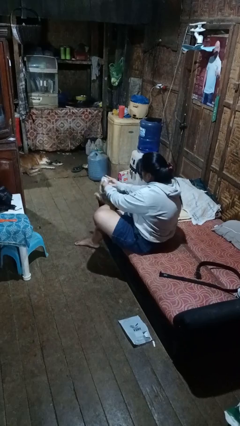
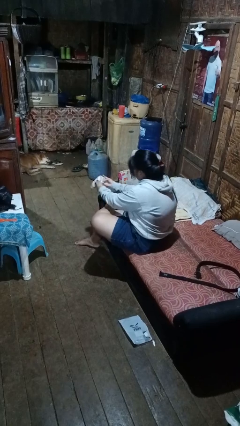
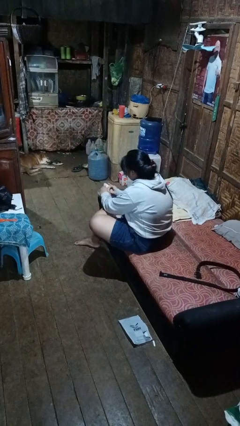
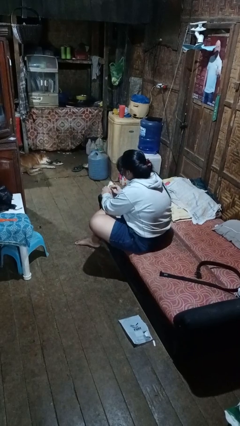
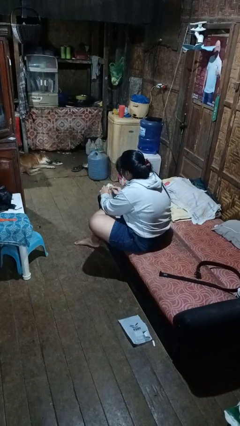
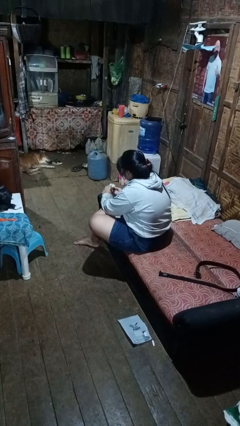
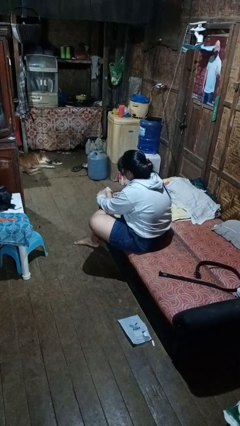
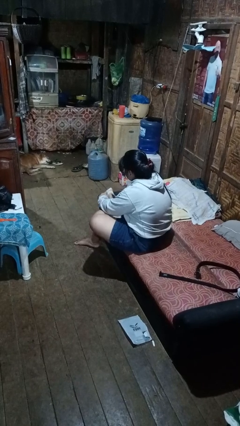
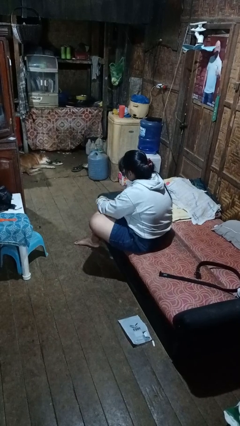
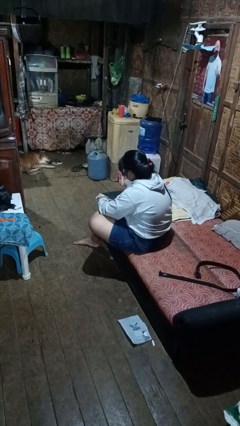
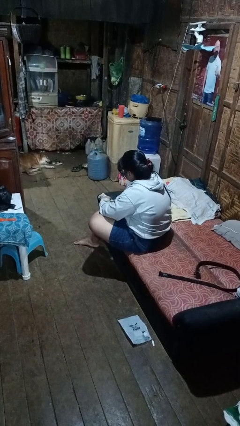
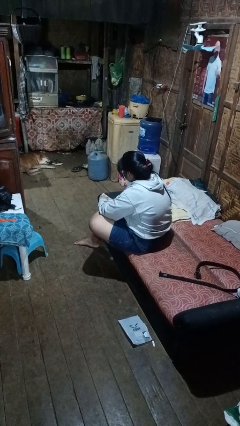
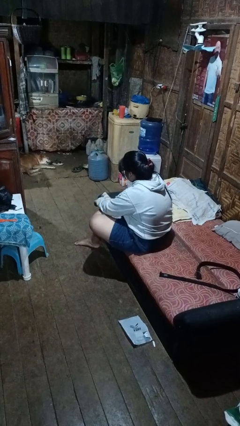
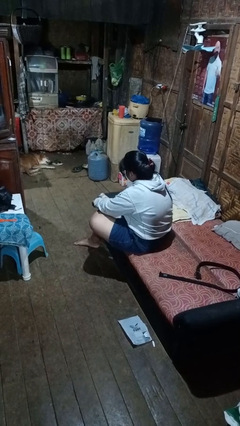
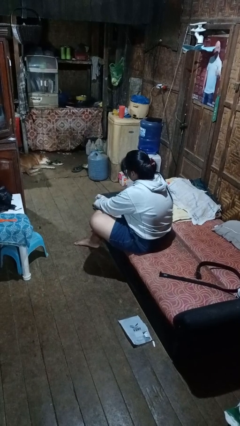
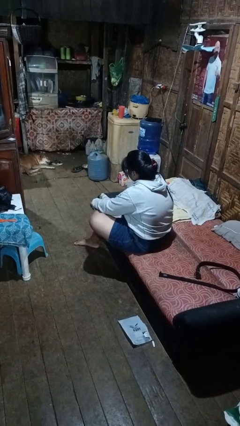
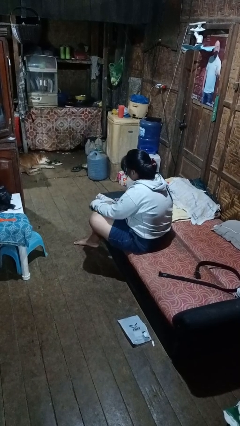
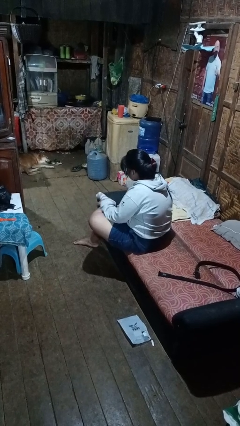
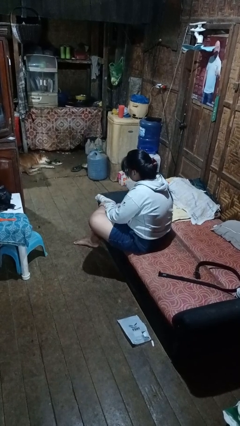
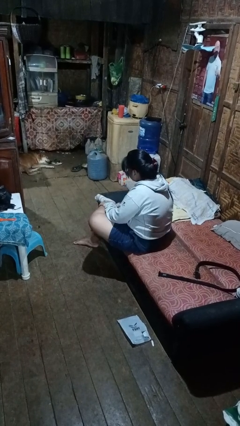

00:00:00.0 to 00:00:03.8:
person puts on socks

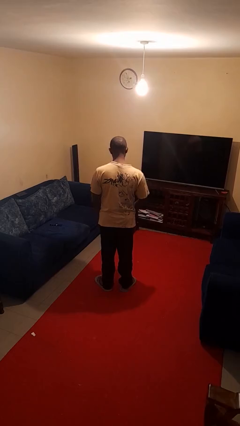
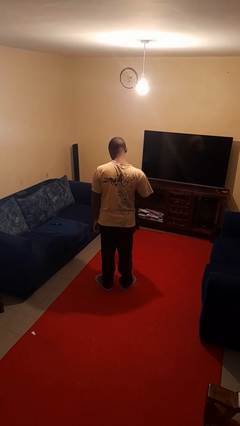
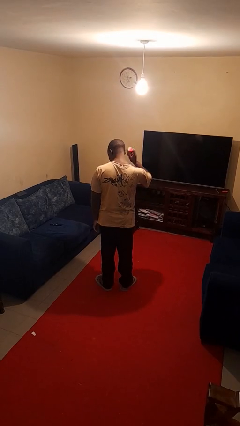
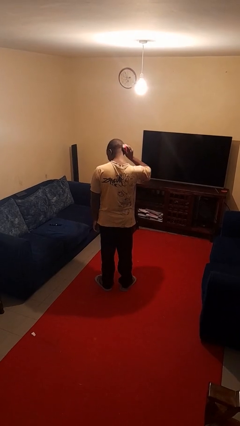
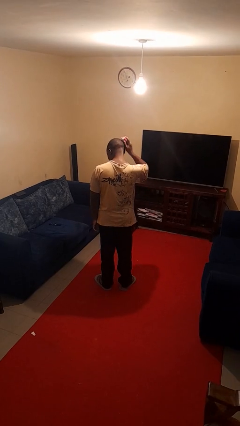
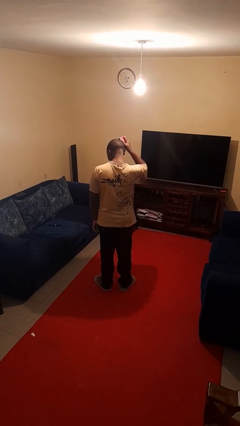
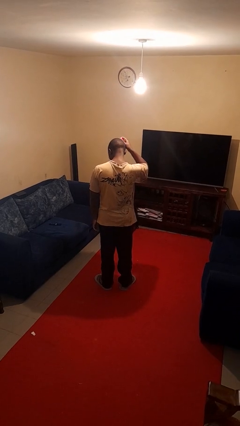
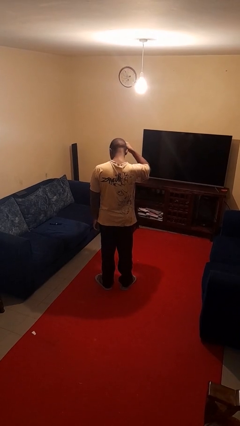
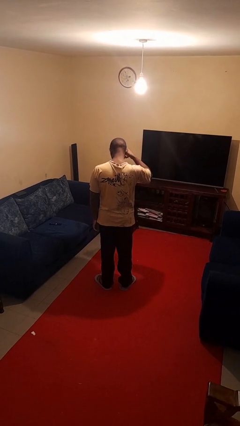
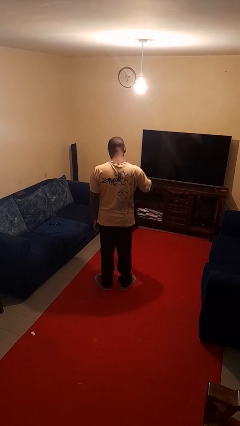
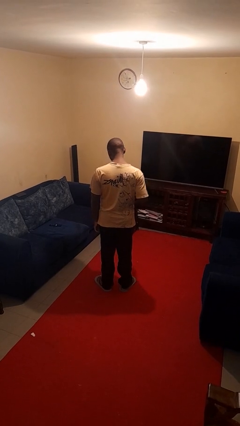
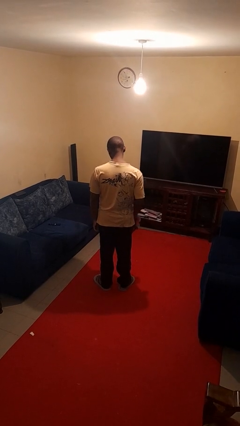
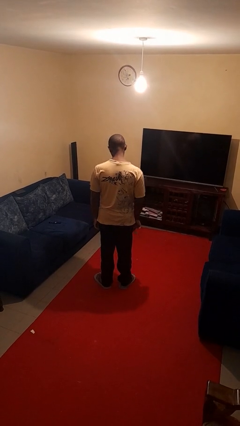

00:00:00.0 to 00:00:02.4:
person brushes hair

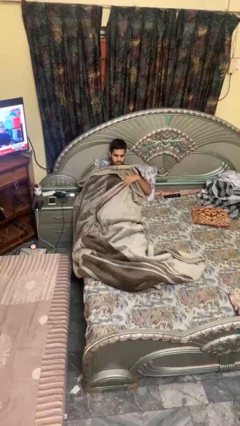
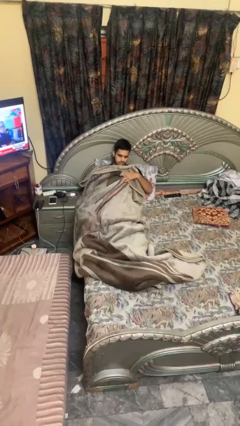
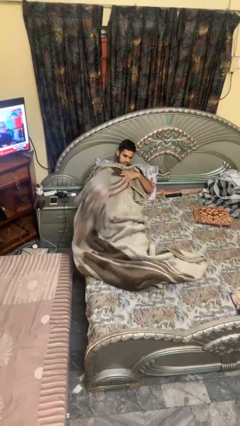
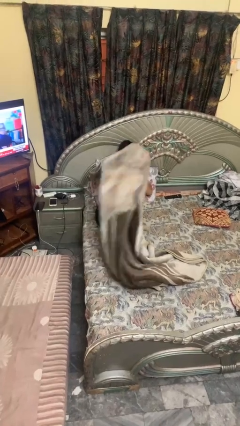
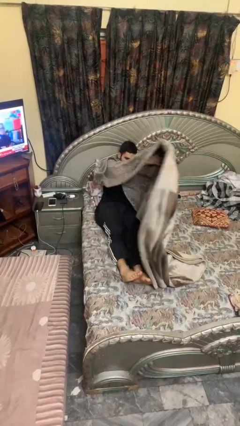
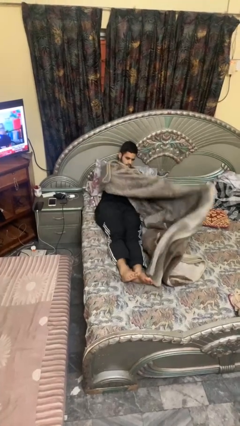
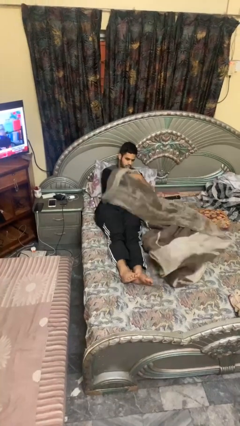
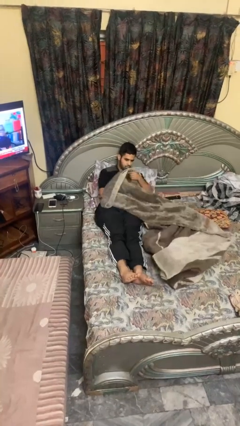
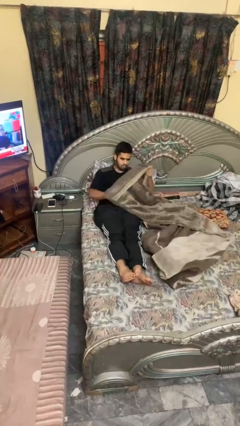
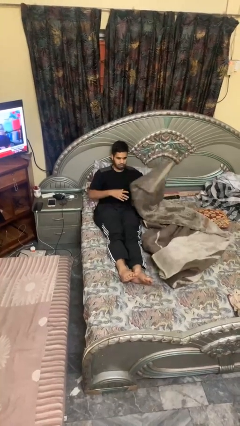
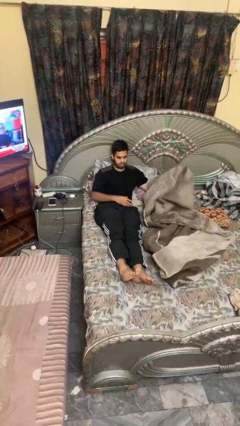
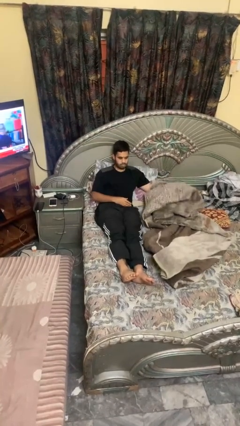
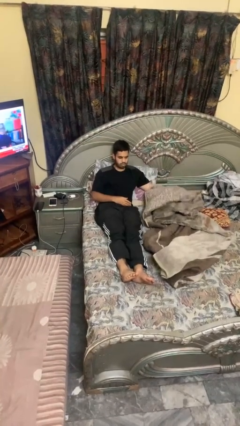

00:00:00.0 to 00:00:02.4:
person uncovers with blanket

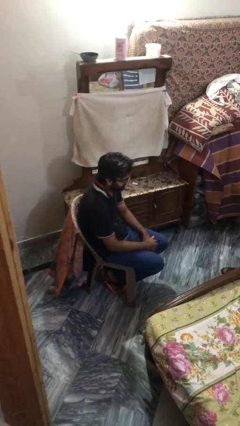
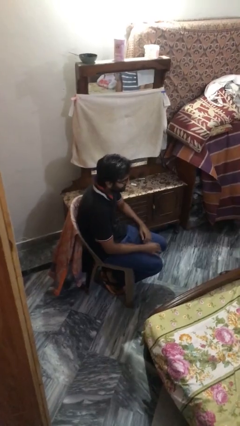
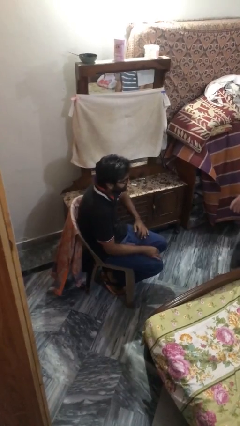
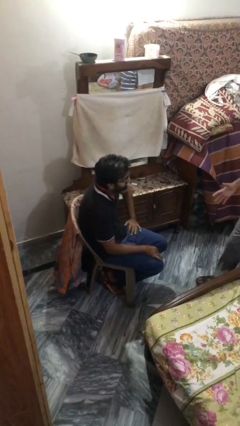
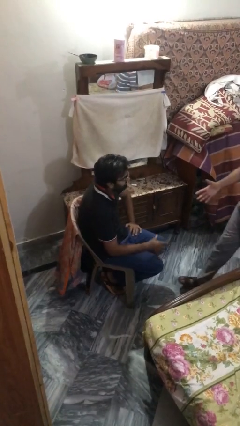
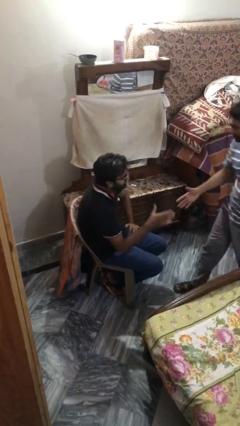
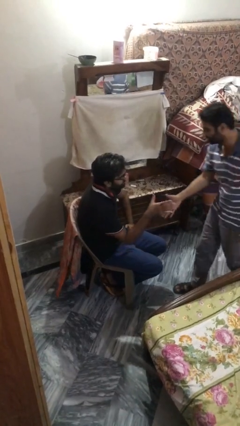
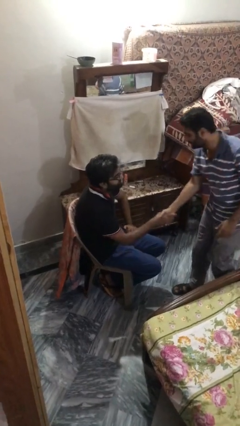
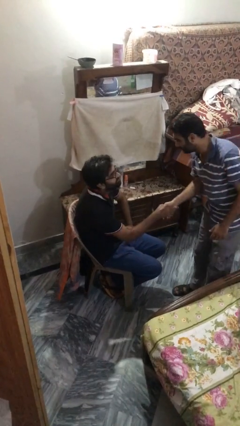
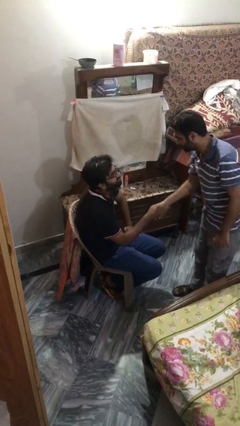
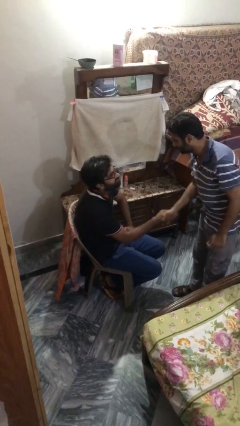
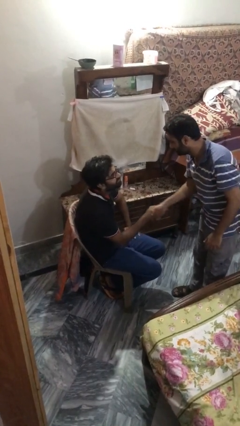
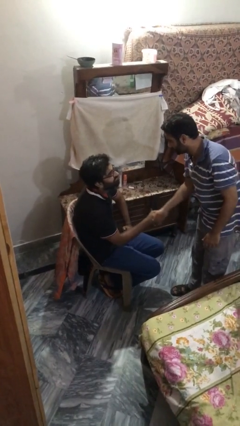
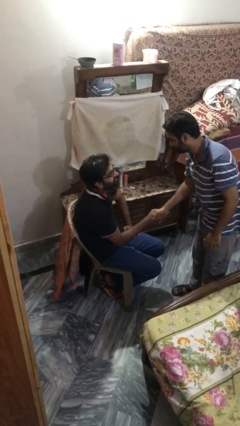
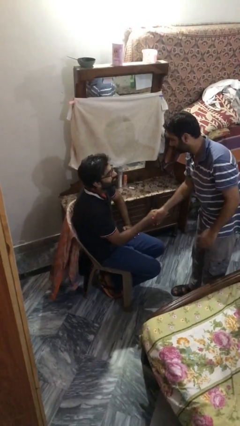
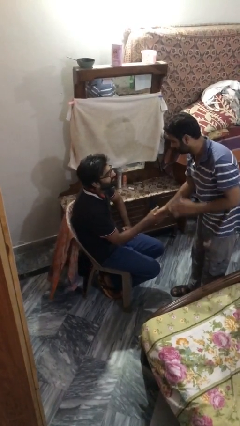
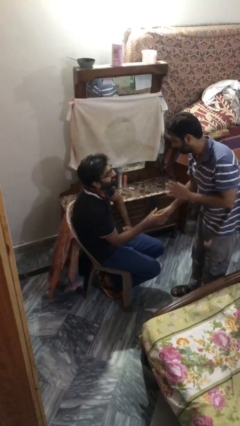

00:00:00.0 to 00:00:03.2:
person shakes hand

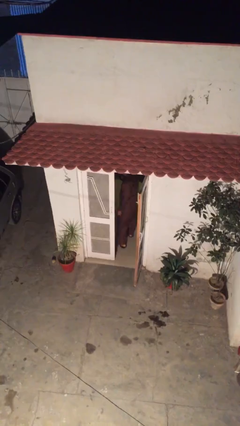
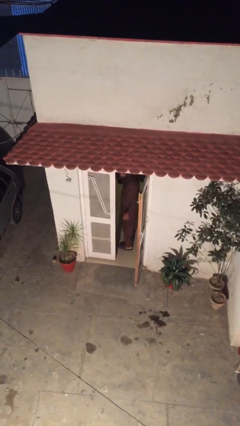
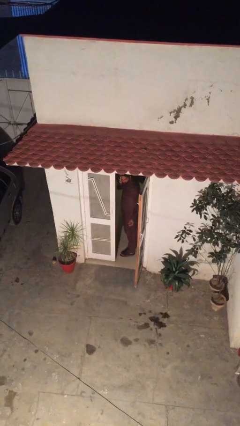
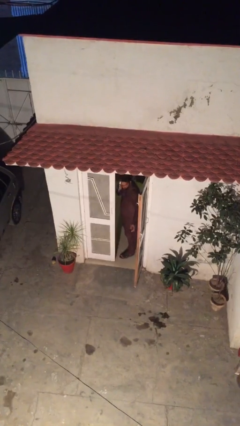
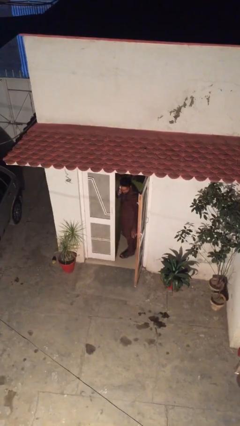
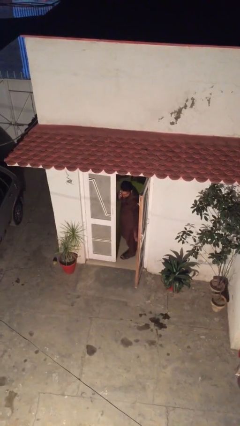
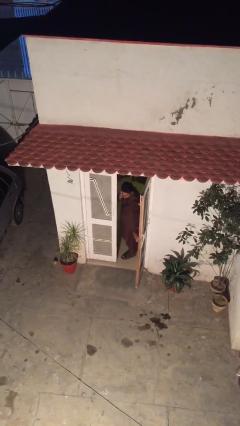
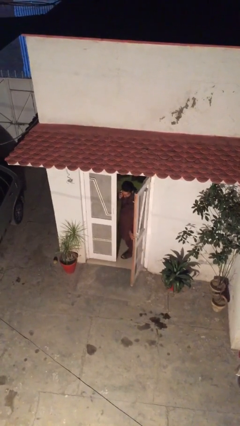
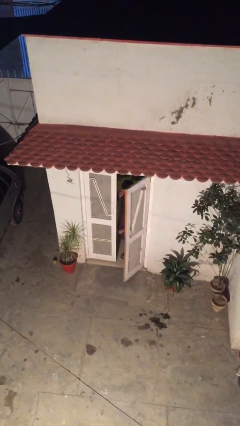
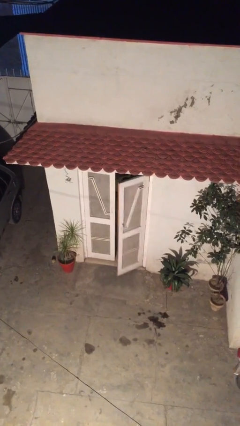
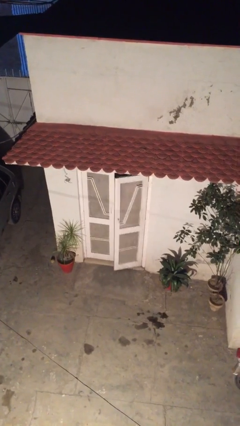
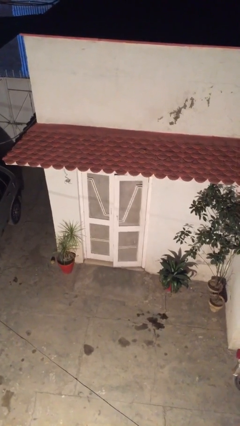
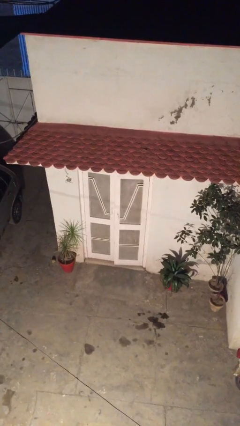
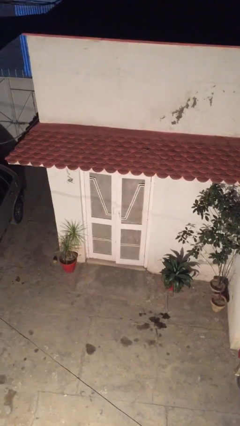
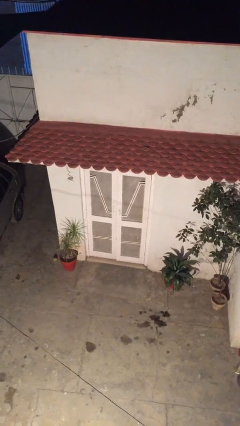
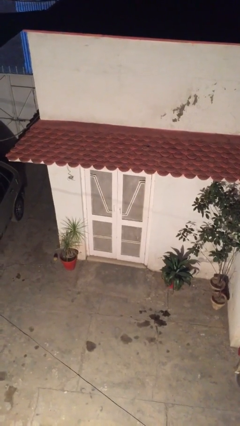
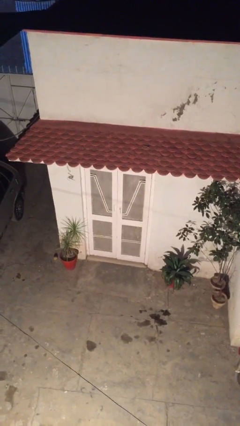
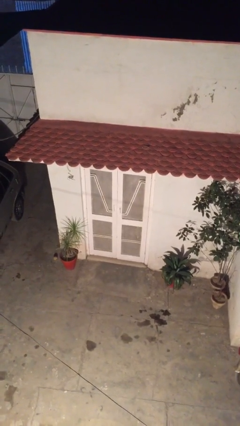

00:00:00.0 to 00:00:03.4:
person closes facility door

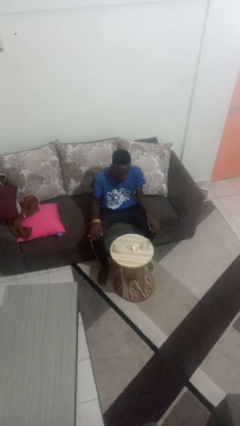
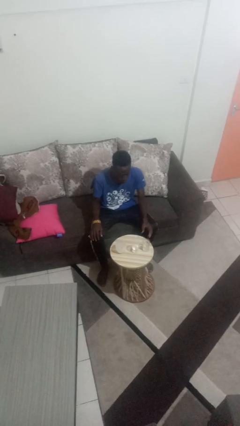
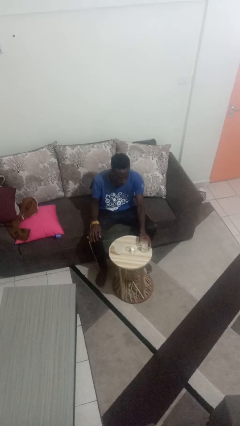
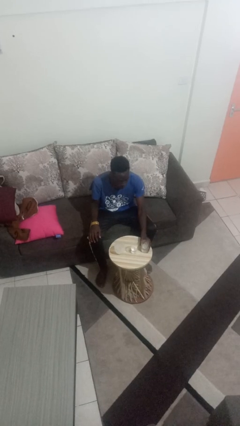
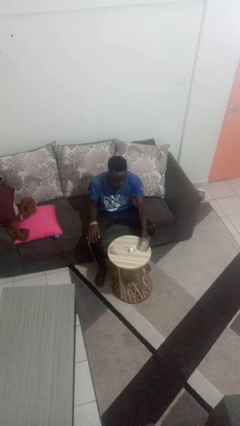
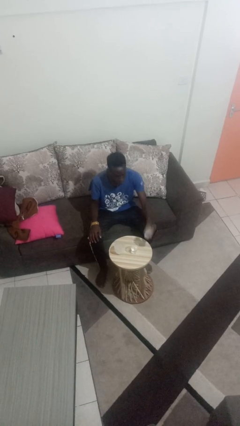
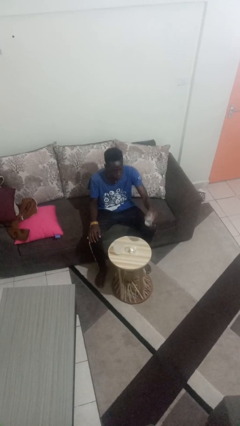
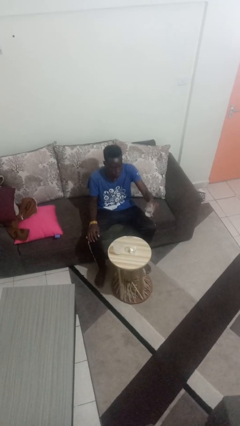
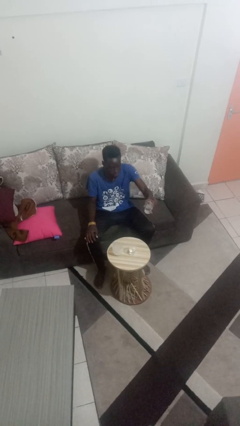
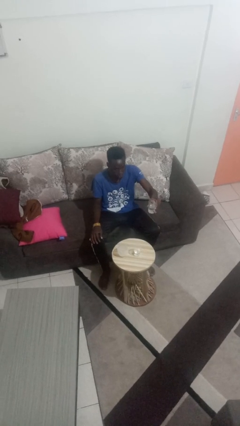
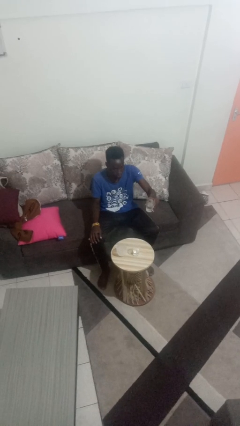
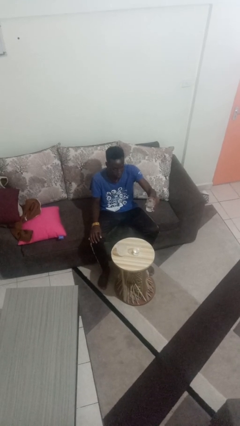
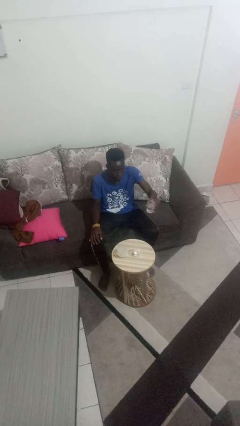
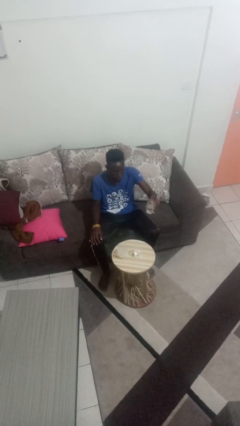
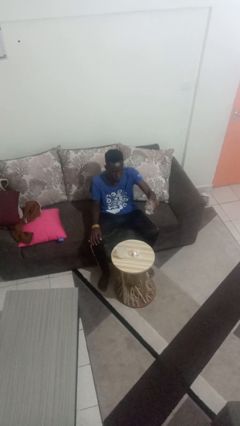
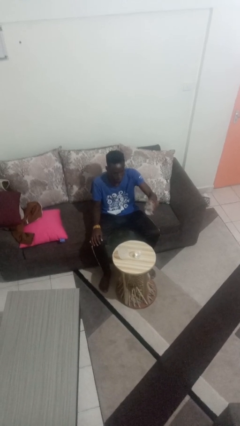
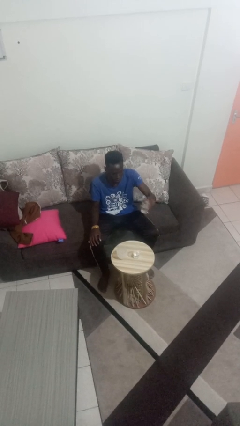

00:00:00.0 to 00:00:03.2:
person picks up object from table
